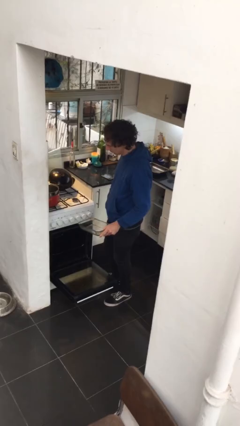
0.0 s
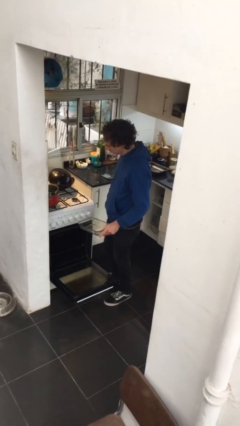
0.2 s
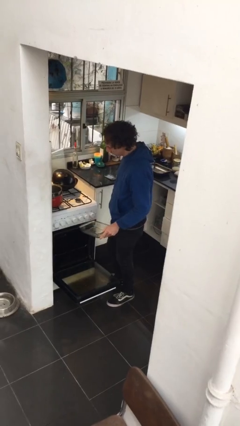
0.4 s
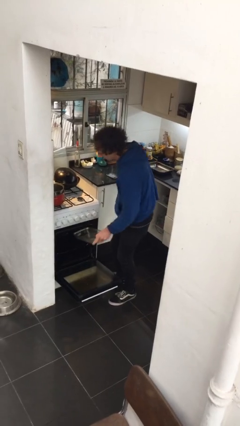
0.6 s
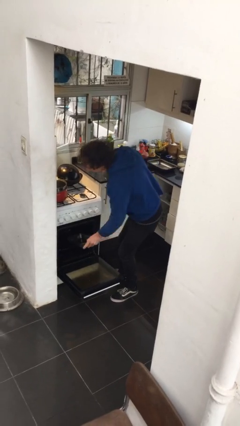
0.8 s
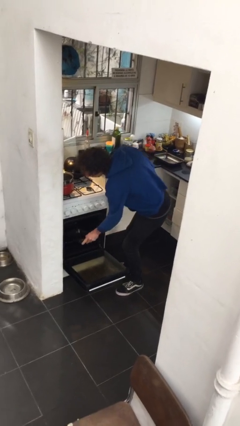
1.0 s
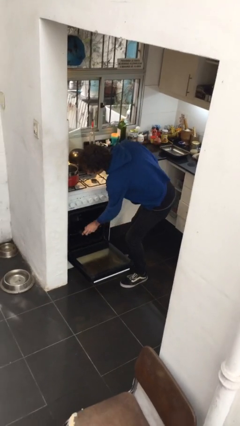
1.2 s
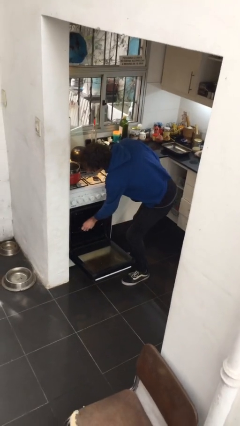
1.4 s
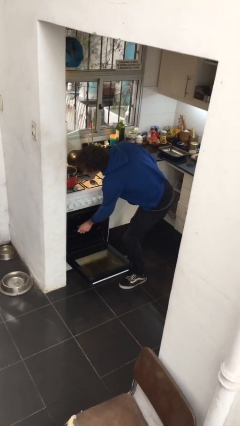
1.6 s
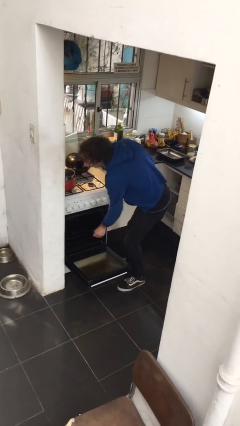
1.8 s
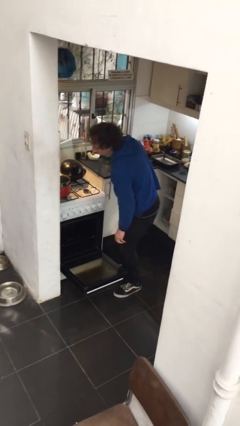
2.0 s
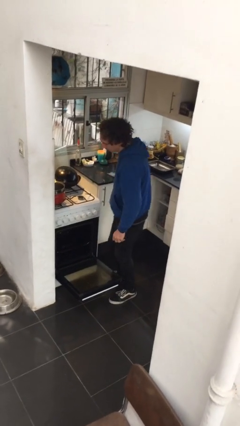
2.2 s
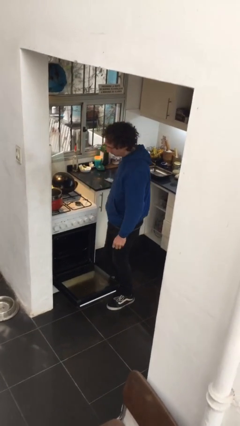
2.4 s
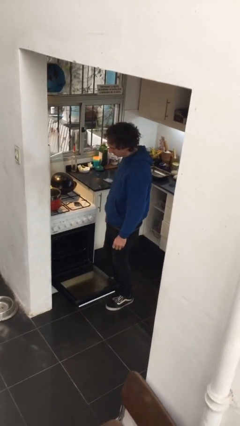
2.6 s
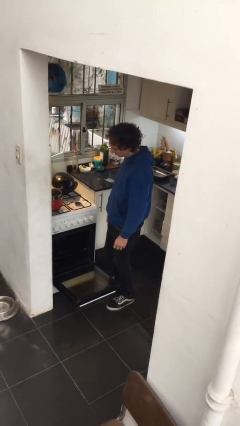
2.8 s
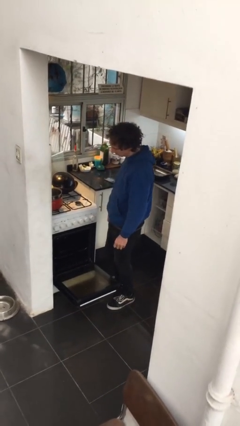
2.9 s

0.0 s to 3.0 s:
person puts object into oven

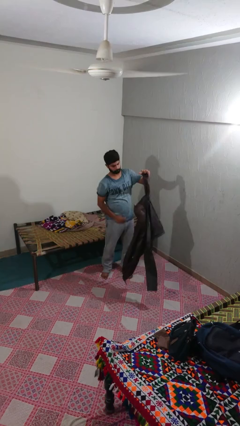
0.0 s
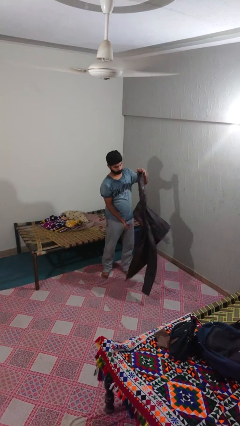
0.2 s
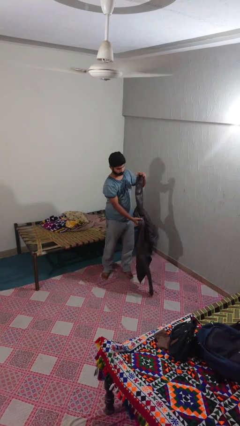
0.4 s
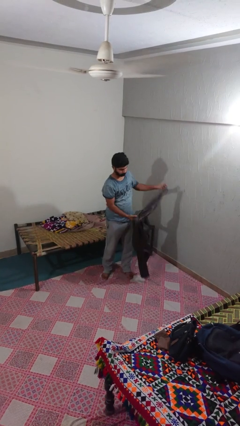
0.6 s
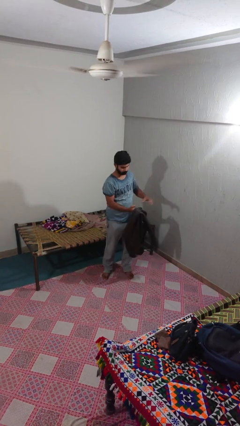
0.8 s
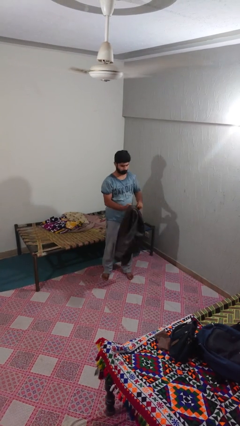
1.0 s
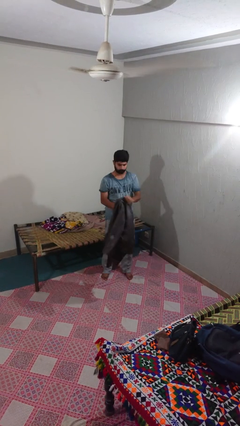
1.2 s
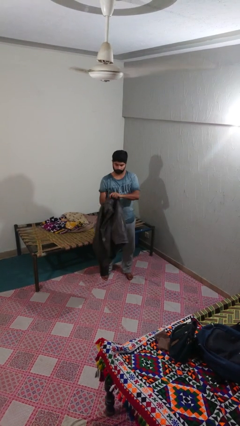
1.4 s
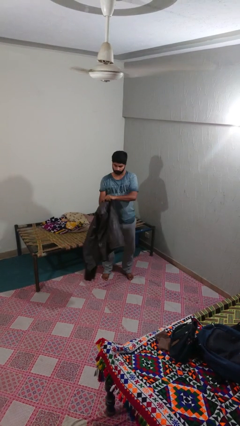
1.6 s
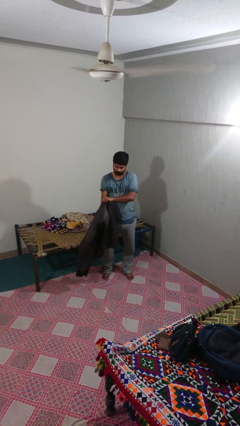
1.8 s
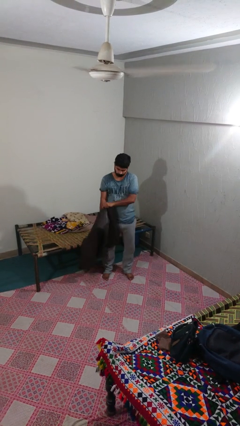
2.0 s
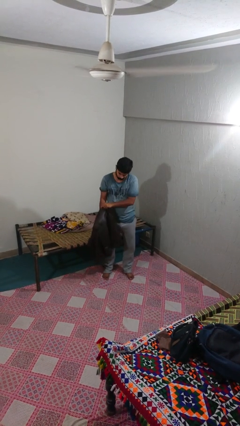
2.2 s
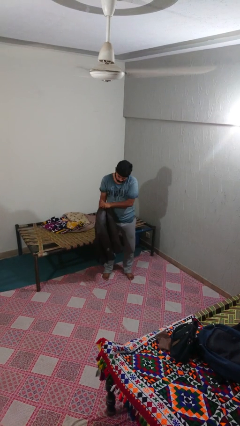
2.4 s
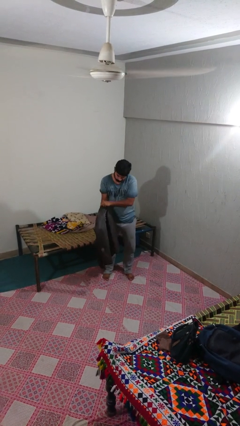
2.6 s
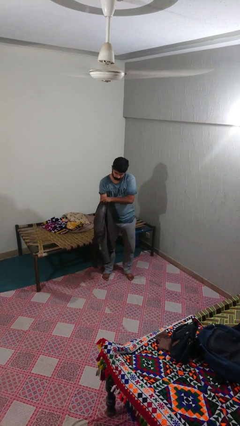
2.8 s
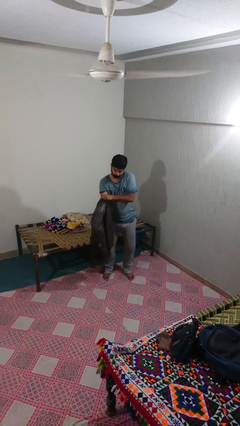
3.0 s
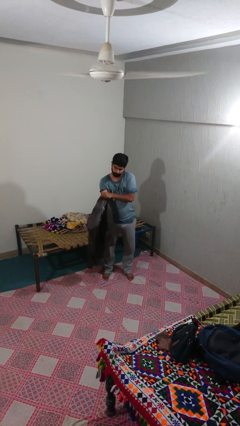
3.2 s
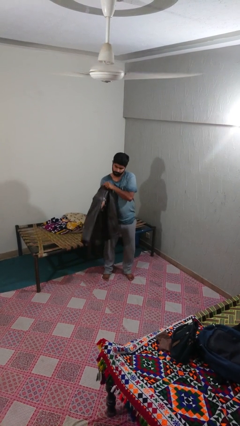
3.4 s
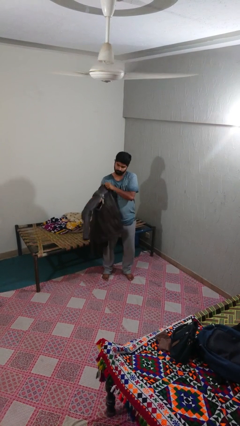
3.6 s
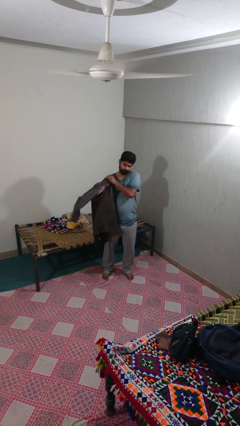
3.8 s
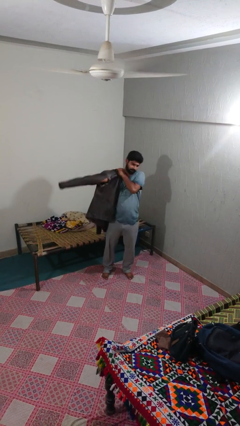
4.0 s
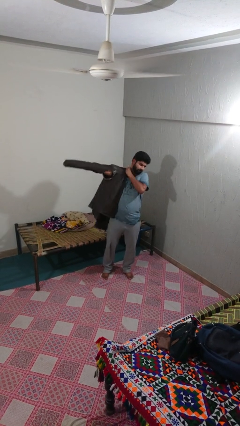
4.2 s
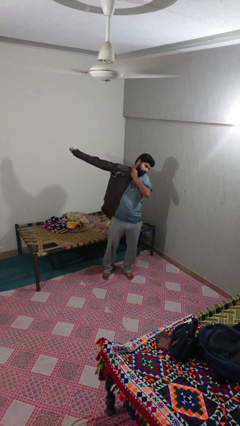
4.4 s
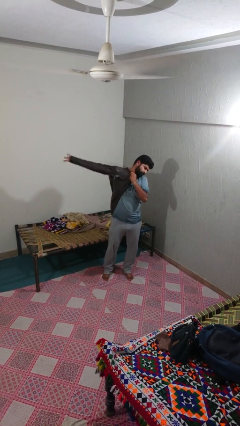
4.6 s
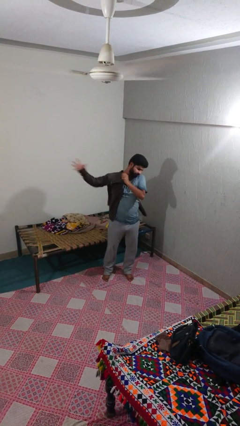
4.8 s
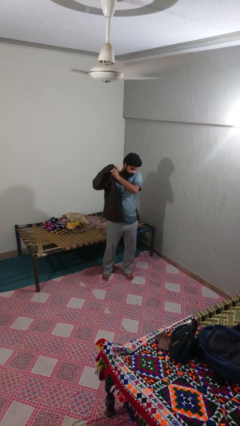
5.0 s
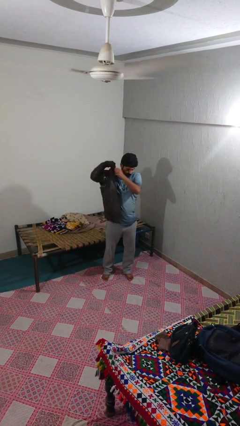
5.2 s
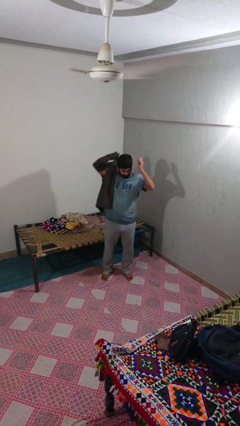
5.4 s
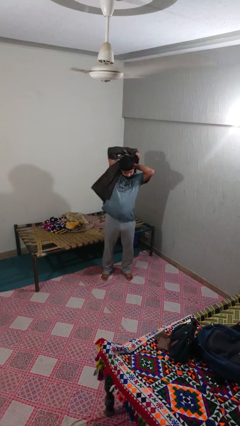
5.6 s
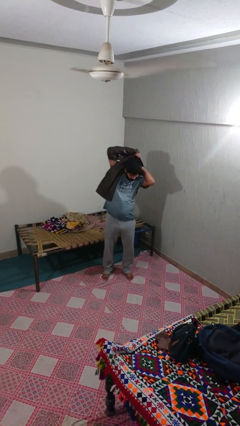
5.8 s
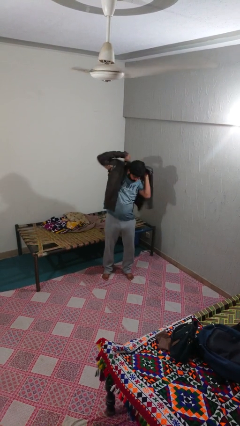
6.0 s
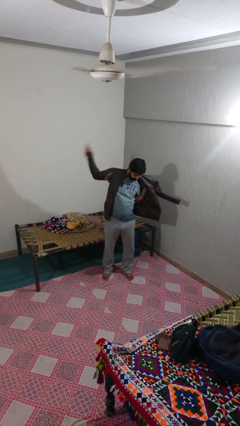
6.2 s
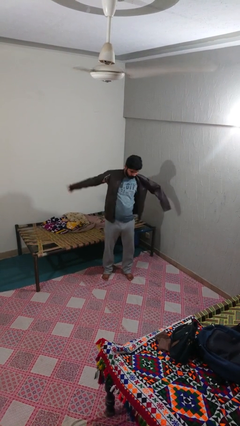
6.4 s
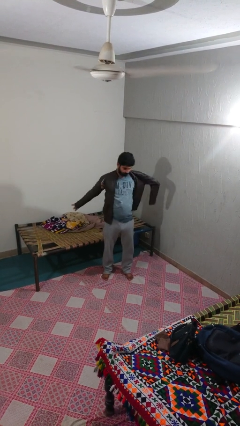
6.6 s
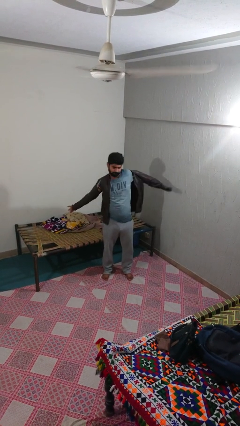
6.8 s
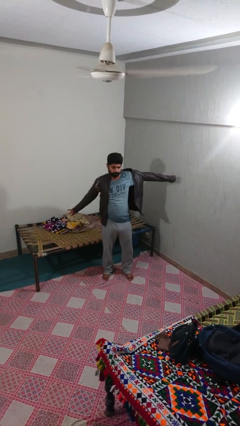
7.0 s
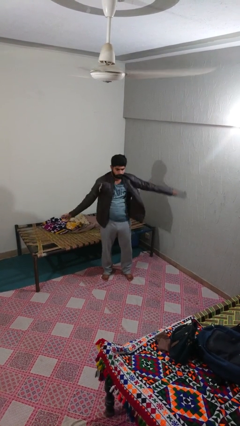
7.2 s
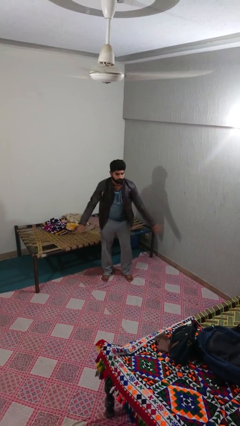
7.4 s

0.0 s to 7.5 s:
person puts on jacket

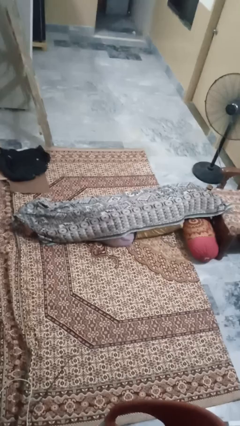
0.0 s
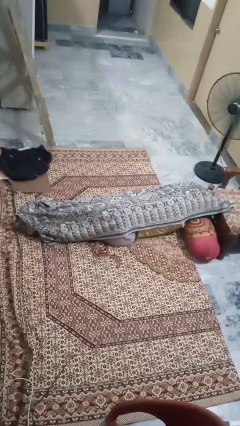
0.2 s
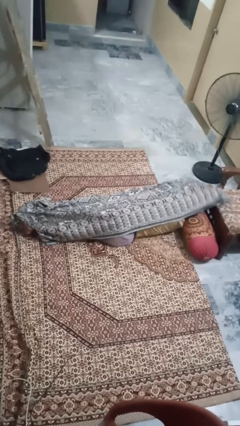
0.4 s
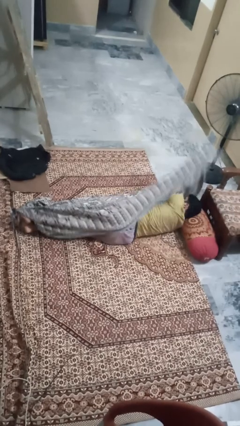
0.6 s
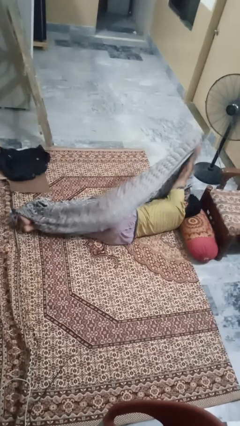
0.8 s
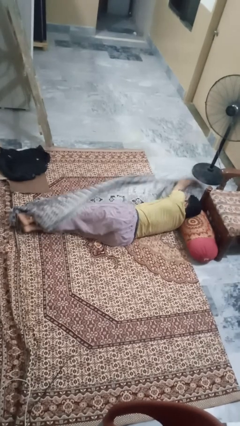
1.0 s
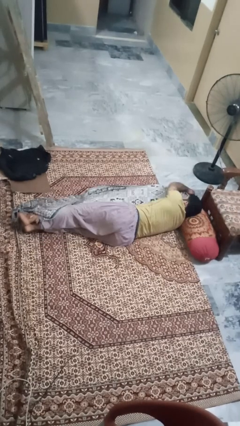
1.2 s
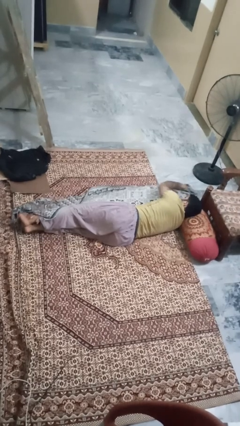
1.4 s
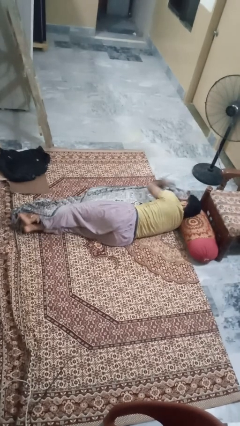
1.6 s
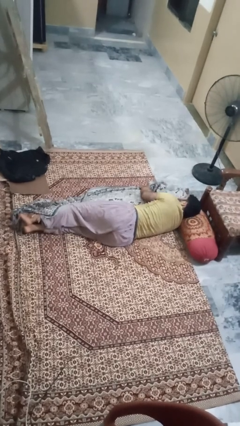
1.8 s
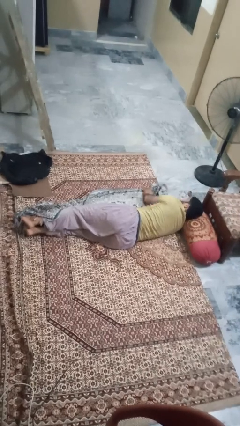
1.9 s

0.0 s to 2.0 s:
person uncovers with blanket

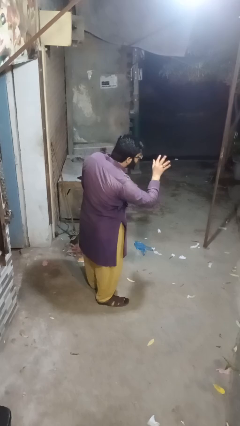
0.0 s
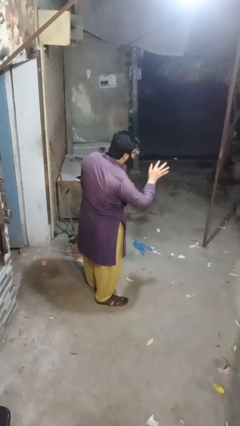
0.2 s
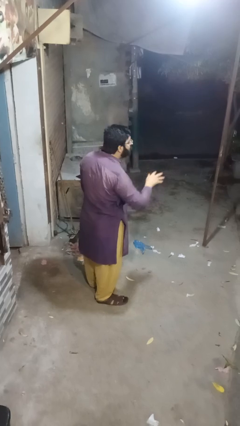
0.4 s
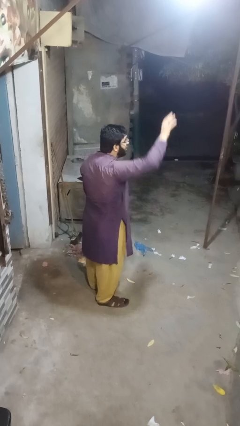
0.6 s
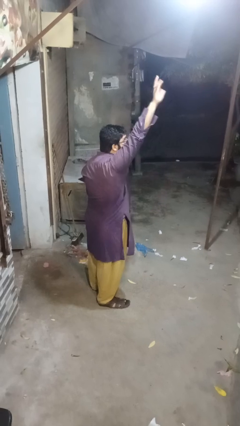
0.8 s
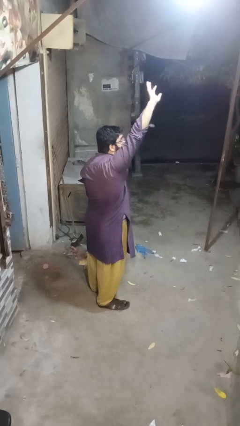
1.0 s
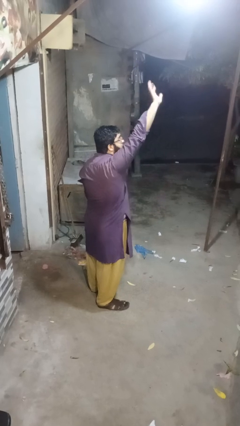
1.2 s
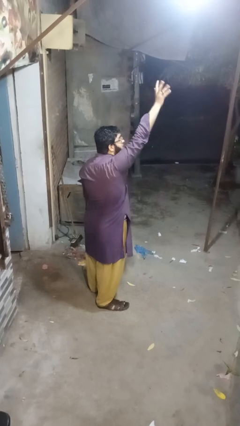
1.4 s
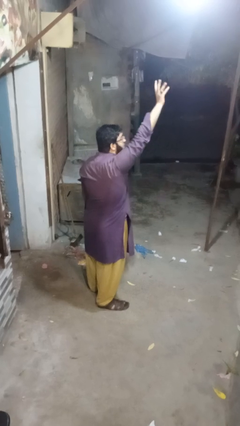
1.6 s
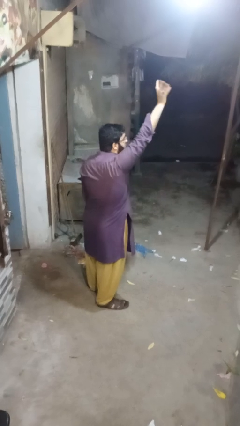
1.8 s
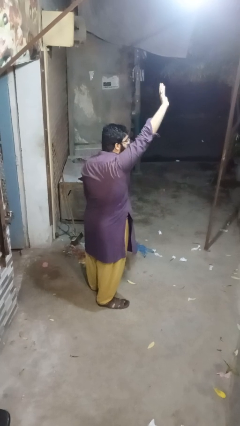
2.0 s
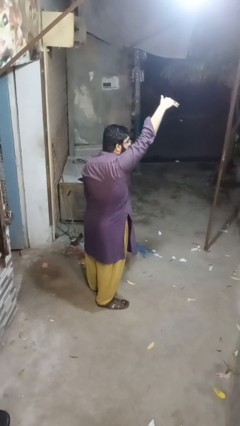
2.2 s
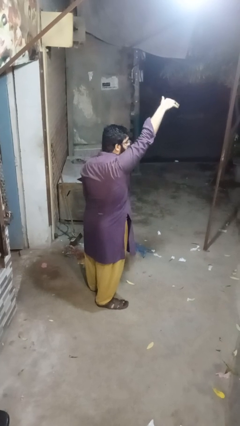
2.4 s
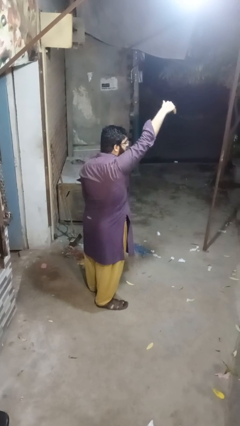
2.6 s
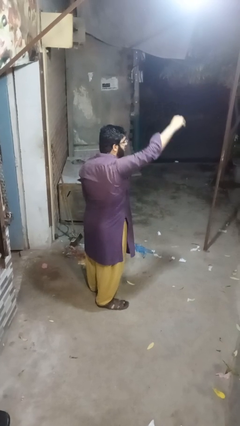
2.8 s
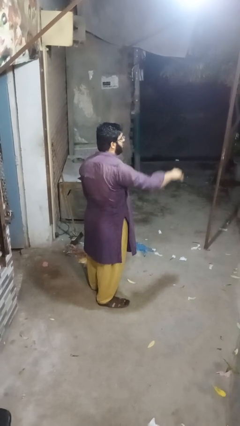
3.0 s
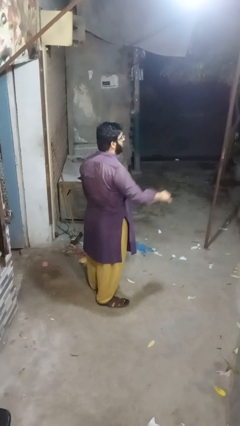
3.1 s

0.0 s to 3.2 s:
person gestures raise hand

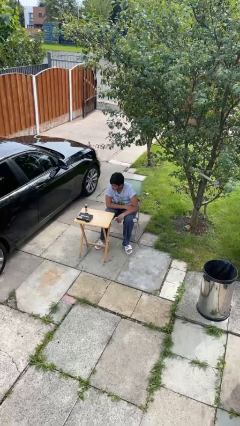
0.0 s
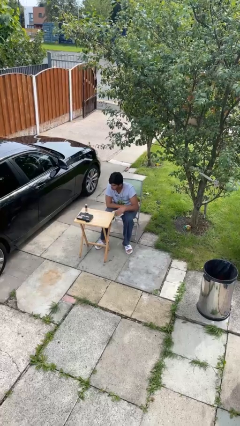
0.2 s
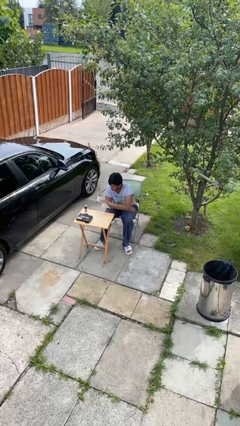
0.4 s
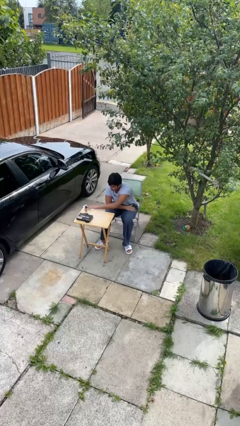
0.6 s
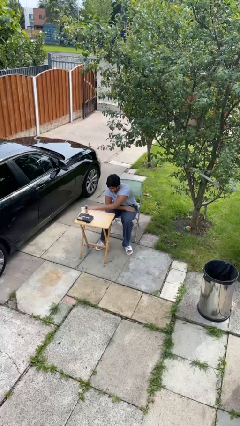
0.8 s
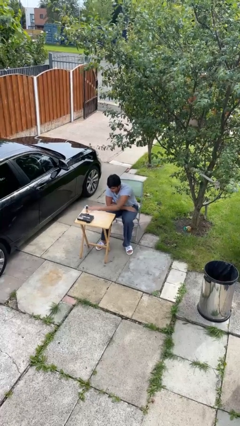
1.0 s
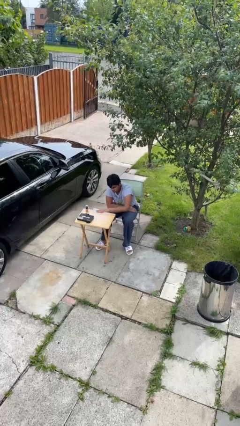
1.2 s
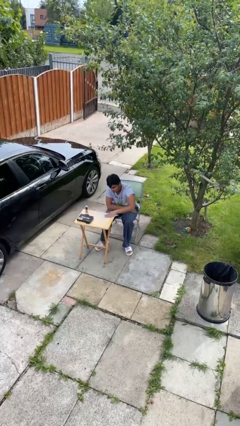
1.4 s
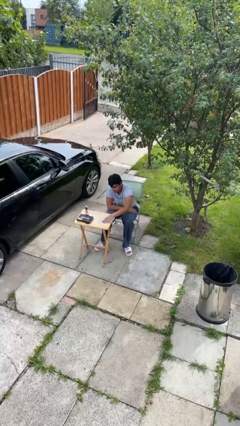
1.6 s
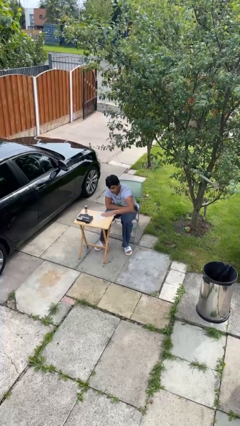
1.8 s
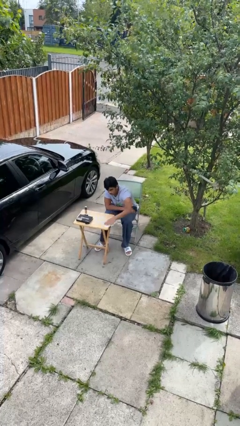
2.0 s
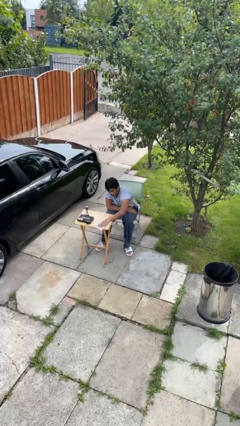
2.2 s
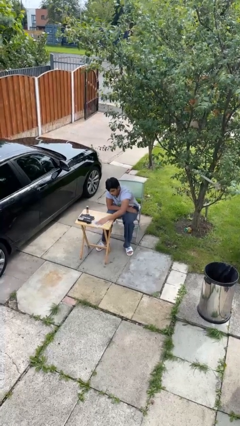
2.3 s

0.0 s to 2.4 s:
person cleans table with rag
